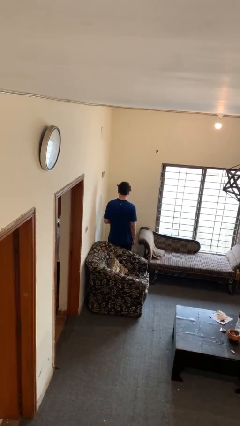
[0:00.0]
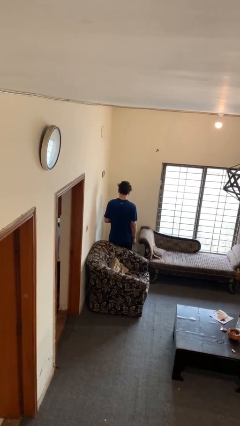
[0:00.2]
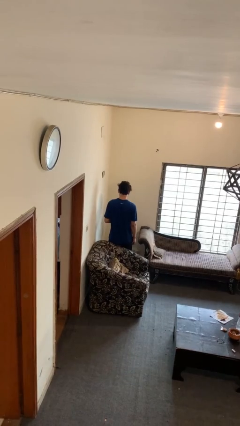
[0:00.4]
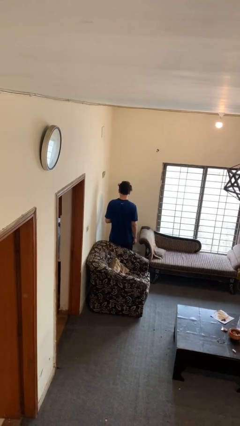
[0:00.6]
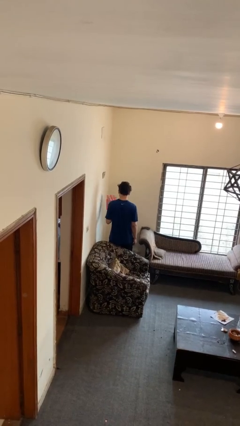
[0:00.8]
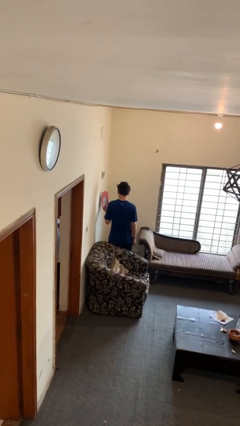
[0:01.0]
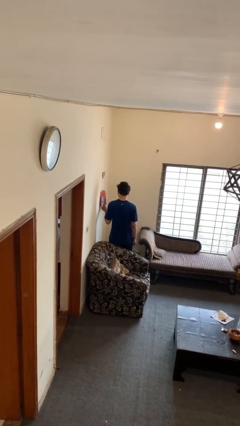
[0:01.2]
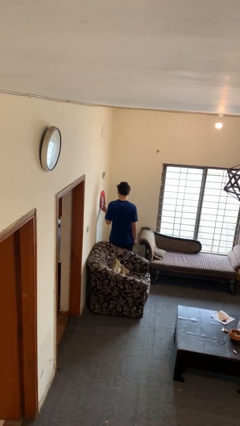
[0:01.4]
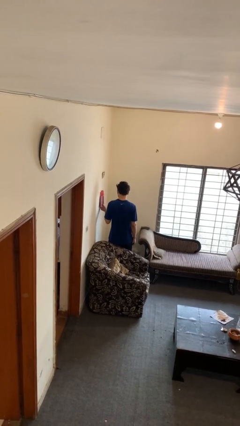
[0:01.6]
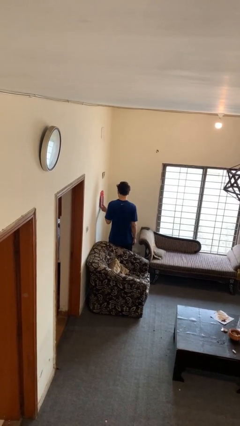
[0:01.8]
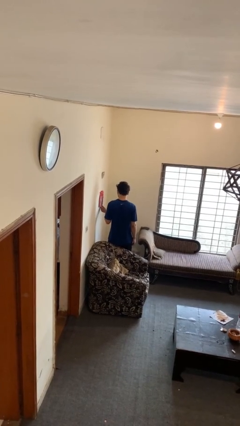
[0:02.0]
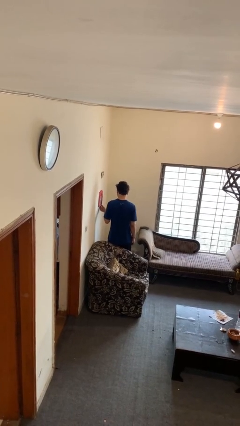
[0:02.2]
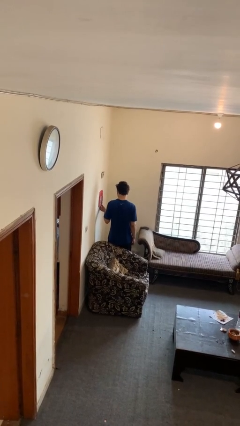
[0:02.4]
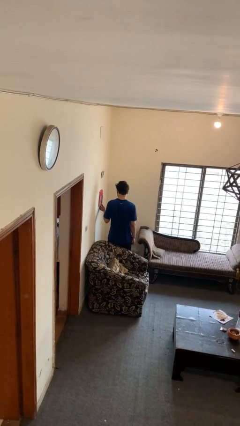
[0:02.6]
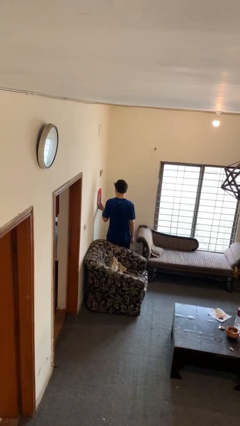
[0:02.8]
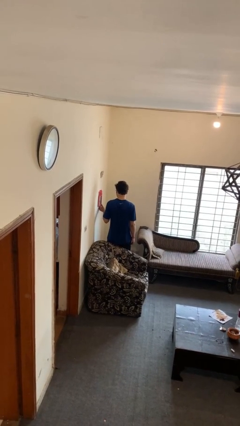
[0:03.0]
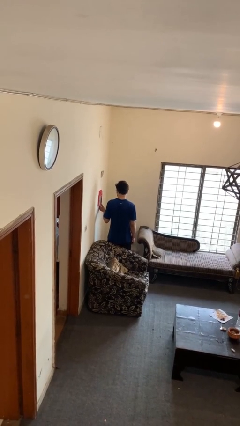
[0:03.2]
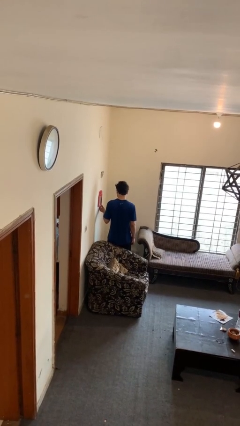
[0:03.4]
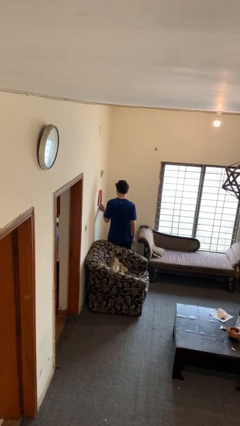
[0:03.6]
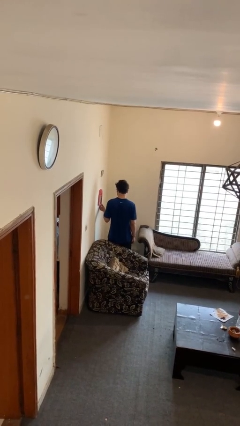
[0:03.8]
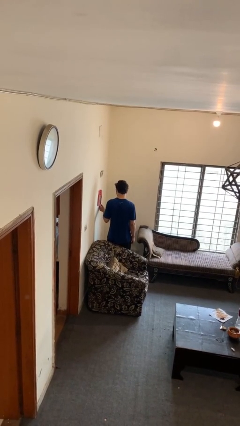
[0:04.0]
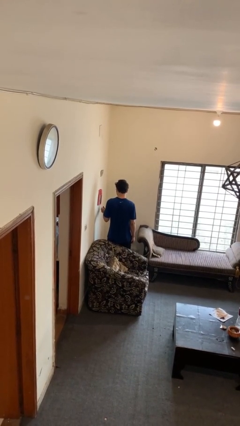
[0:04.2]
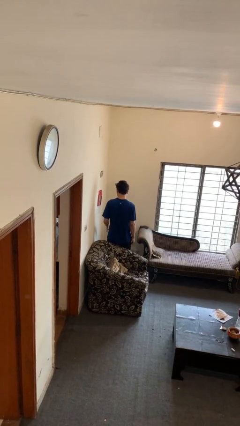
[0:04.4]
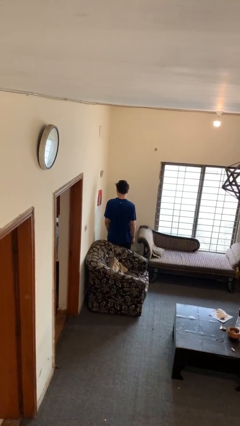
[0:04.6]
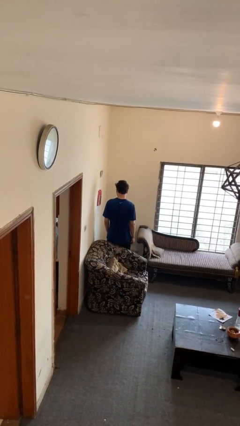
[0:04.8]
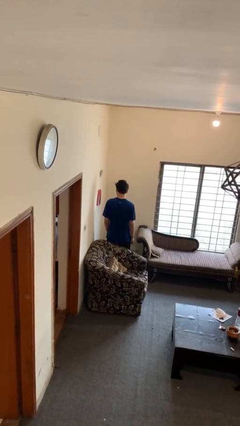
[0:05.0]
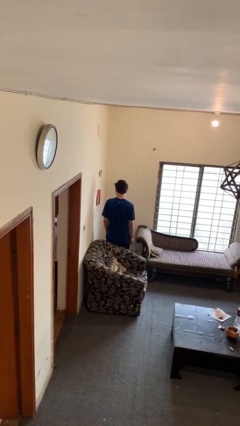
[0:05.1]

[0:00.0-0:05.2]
person puts up picture frame

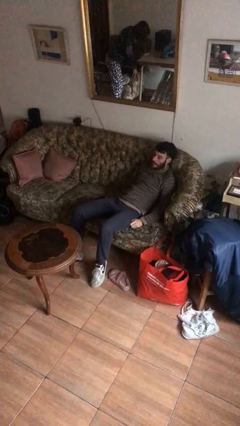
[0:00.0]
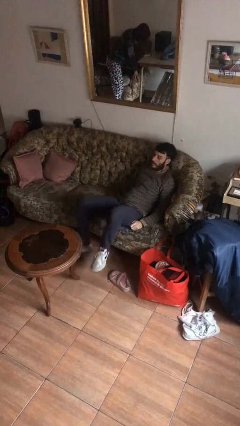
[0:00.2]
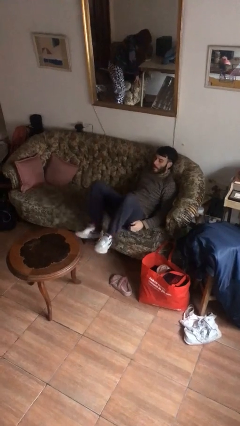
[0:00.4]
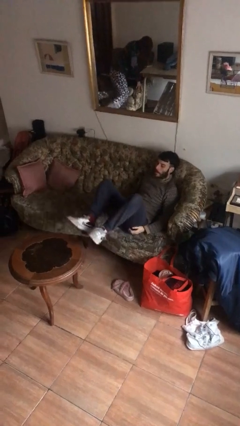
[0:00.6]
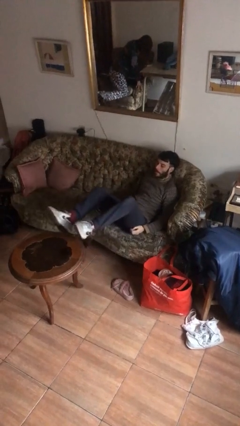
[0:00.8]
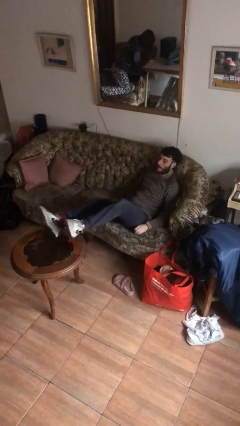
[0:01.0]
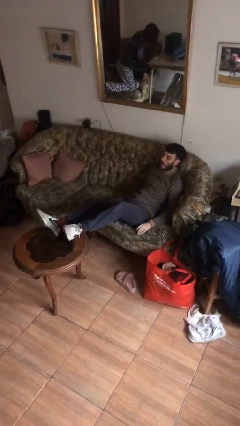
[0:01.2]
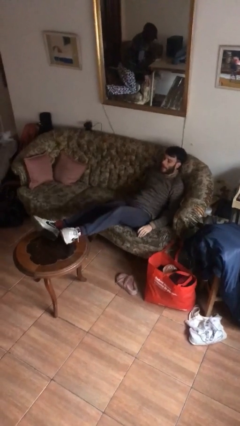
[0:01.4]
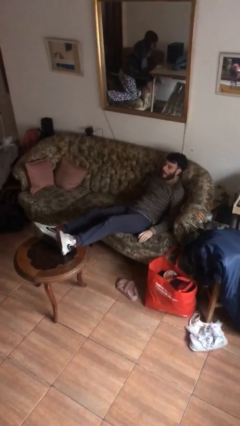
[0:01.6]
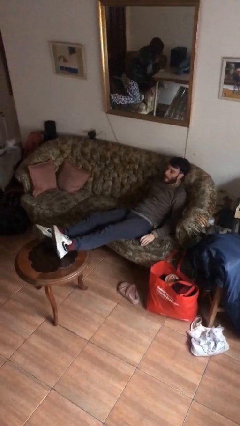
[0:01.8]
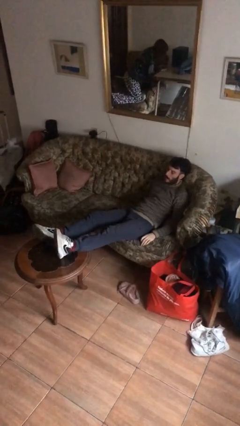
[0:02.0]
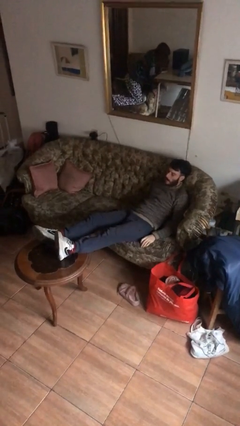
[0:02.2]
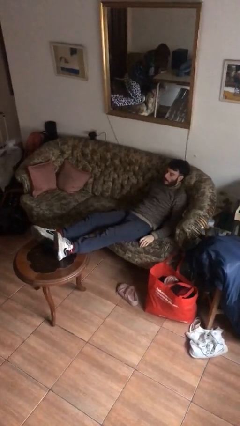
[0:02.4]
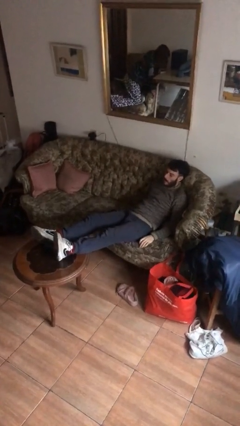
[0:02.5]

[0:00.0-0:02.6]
person puts feet up

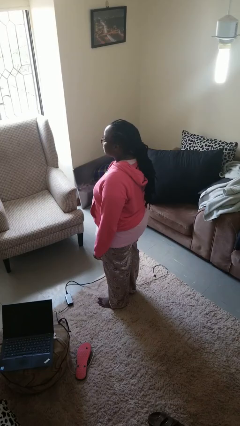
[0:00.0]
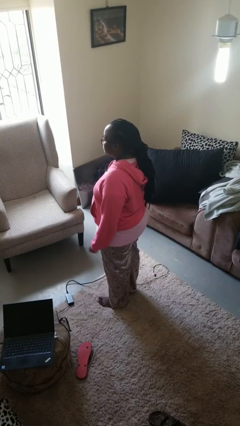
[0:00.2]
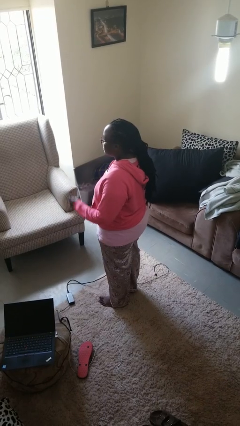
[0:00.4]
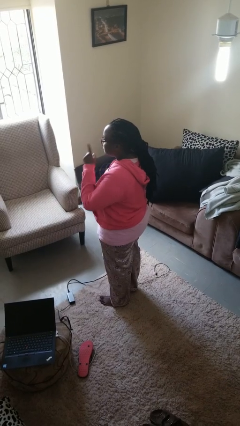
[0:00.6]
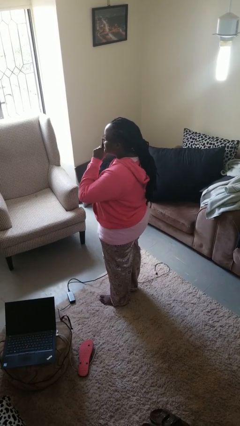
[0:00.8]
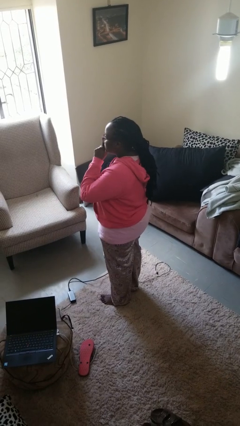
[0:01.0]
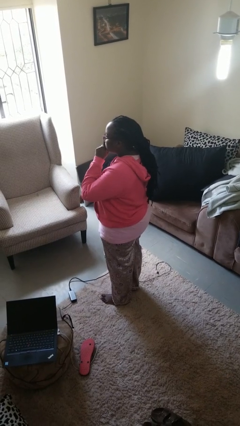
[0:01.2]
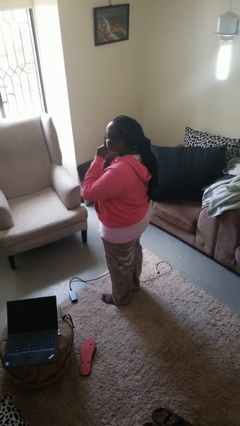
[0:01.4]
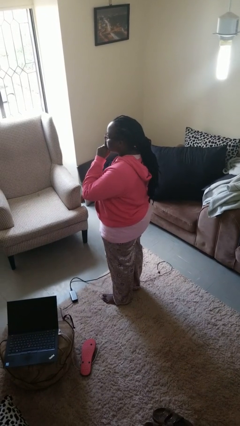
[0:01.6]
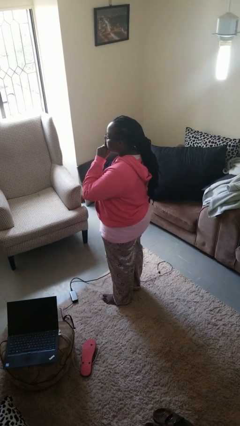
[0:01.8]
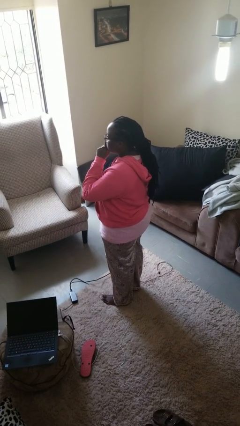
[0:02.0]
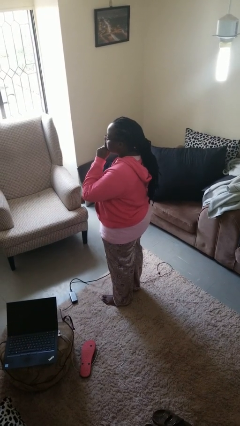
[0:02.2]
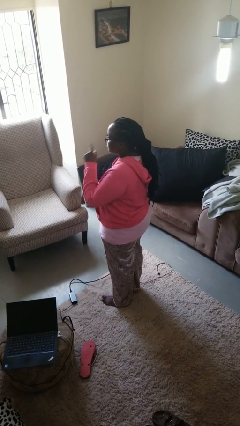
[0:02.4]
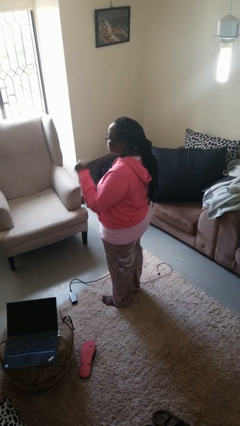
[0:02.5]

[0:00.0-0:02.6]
person gestures be quiet

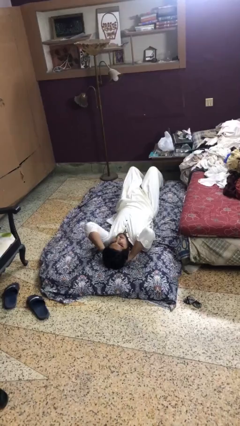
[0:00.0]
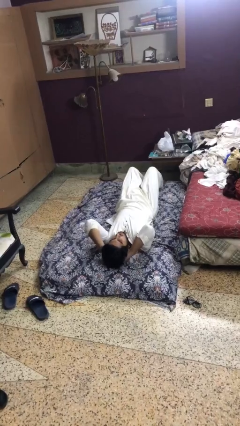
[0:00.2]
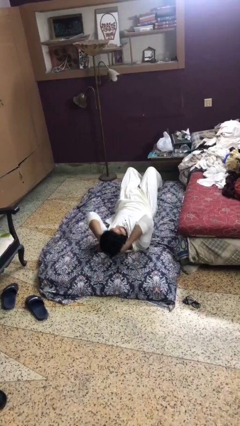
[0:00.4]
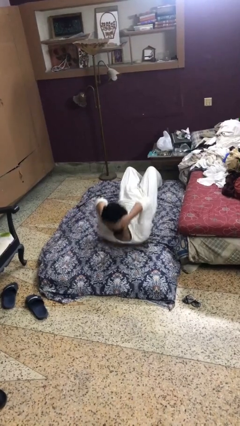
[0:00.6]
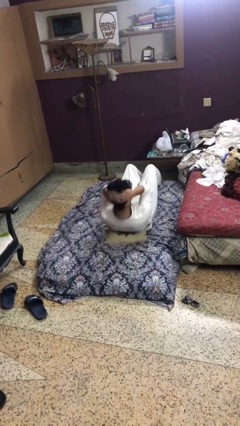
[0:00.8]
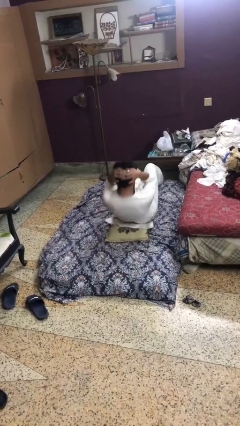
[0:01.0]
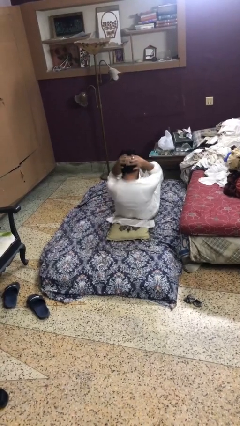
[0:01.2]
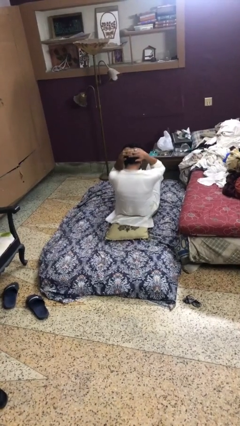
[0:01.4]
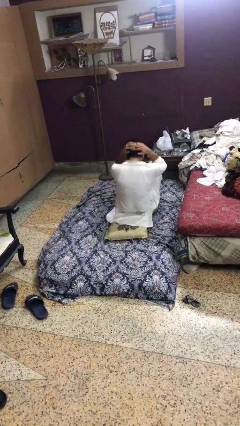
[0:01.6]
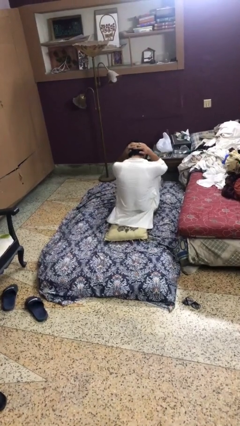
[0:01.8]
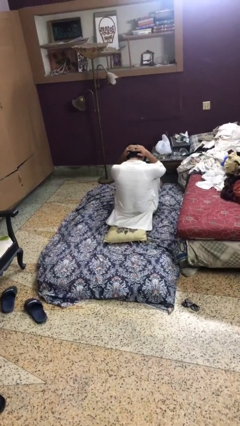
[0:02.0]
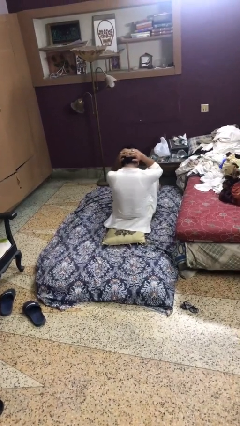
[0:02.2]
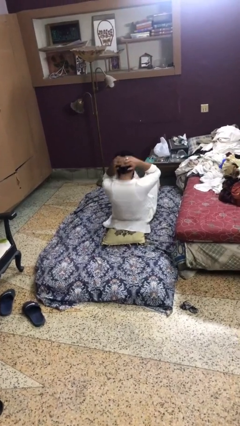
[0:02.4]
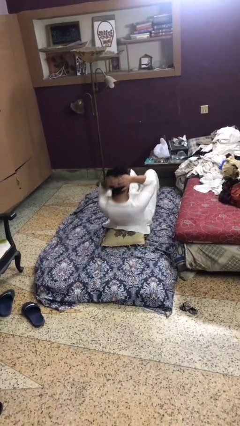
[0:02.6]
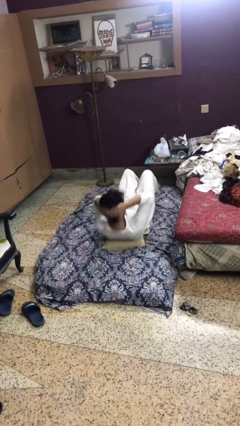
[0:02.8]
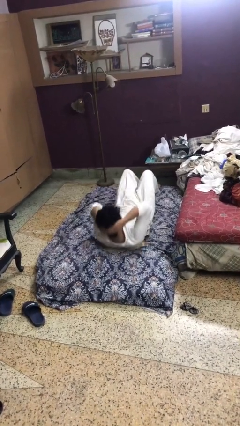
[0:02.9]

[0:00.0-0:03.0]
person exercises with situp

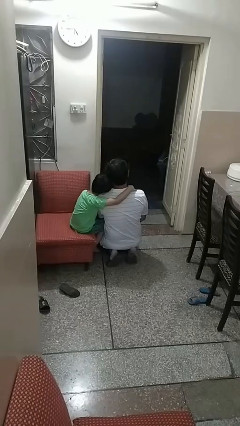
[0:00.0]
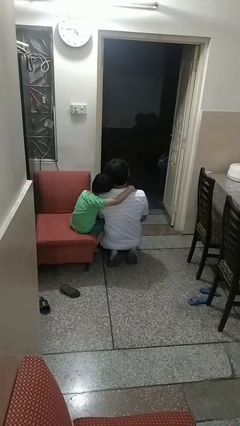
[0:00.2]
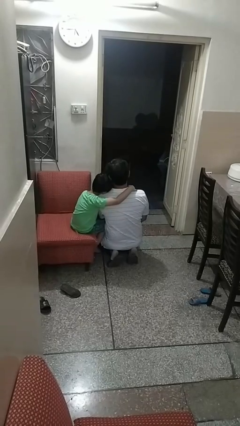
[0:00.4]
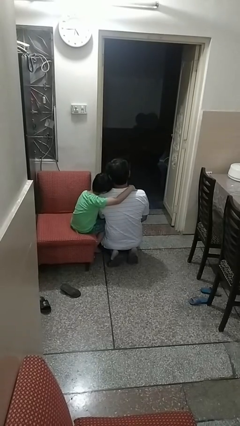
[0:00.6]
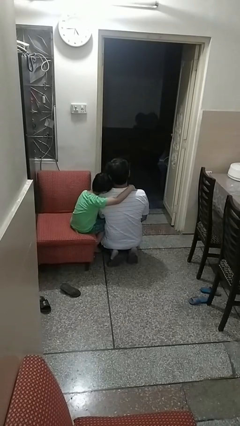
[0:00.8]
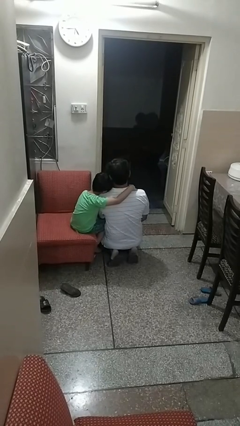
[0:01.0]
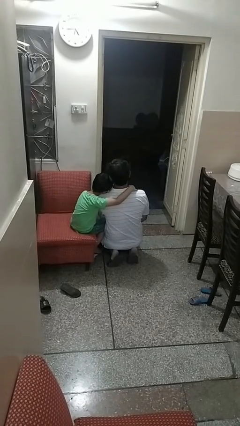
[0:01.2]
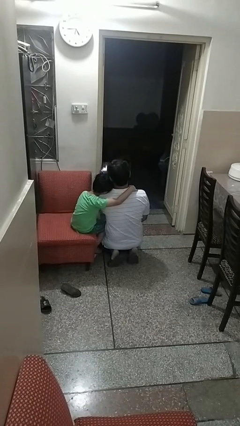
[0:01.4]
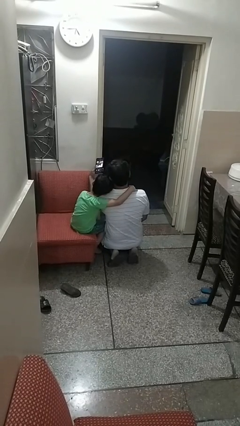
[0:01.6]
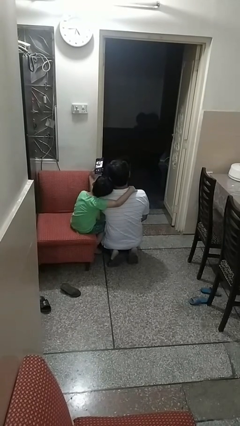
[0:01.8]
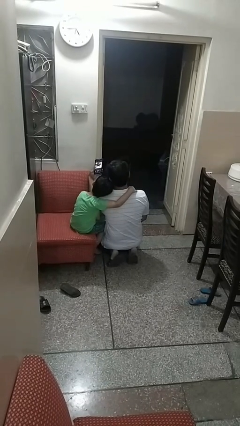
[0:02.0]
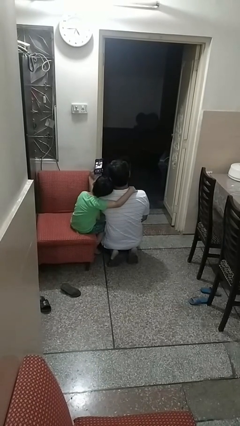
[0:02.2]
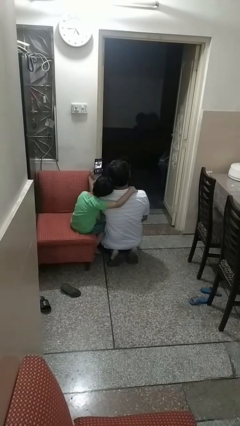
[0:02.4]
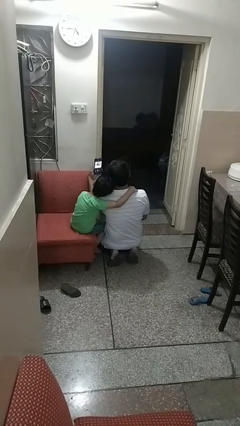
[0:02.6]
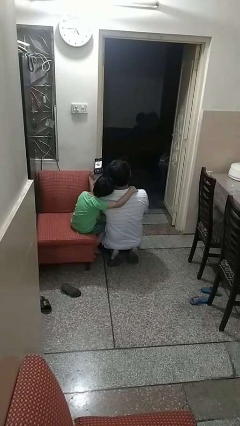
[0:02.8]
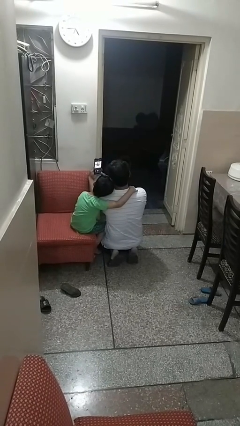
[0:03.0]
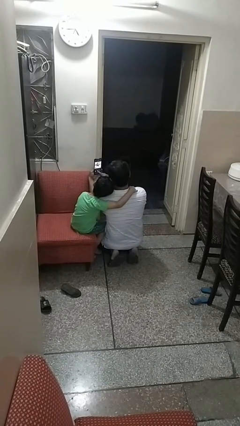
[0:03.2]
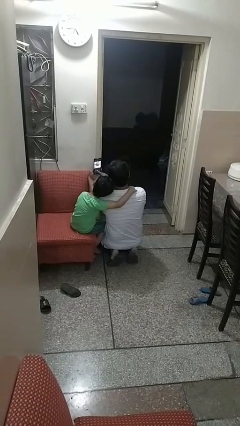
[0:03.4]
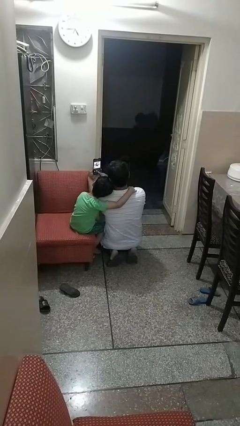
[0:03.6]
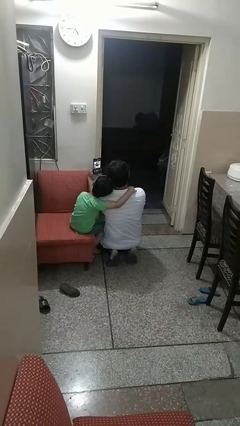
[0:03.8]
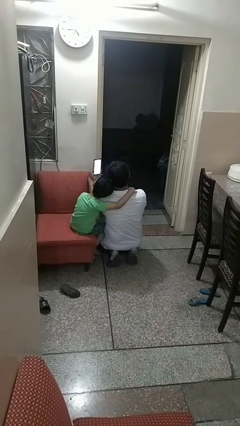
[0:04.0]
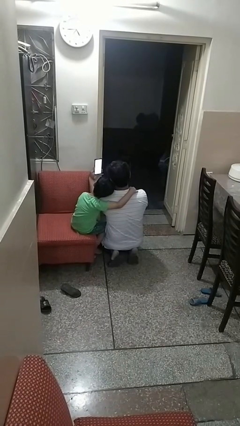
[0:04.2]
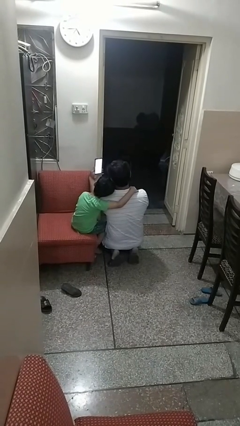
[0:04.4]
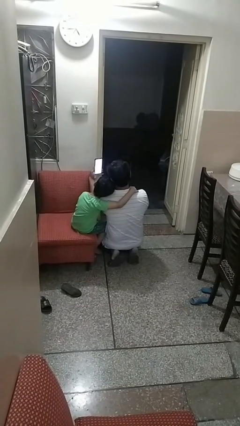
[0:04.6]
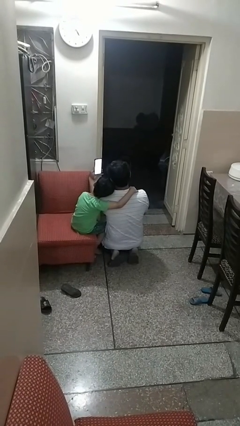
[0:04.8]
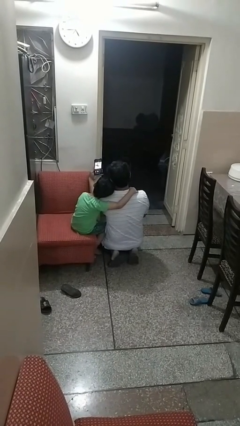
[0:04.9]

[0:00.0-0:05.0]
person takes selfie with person
